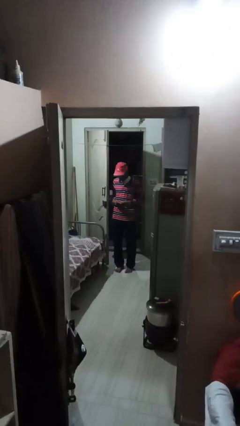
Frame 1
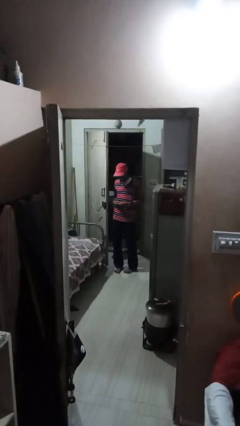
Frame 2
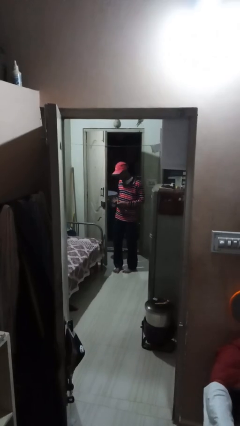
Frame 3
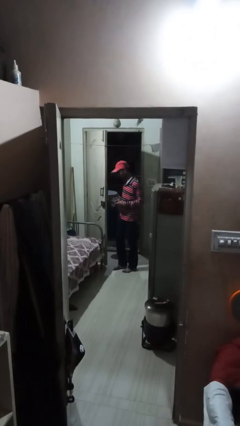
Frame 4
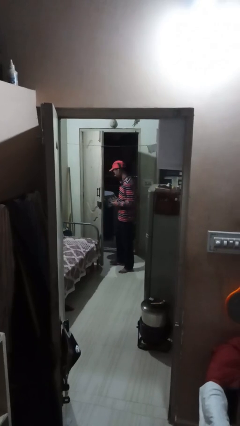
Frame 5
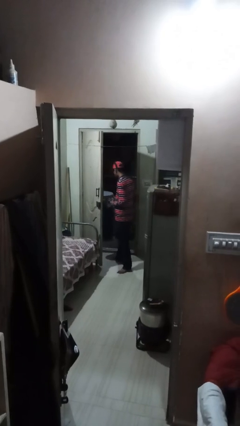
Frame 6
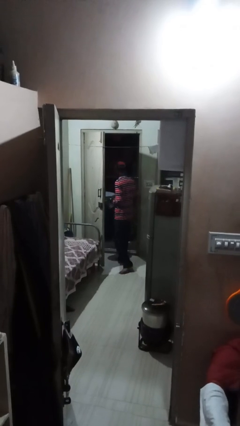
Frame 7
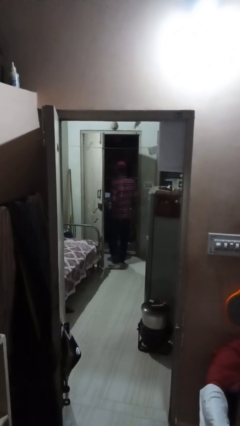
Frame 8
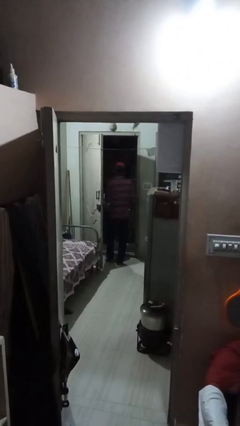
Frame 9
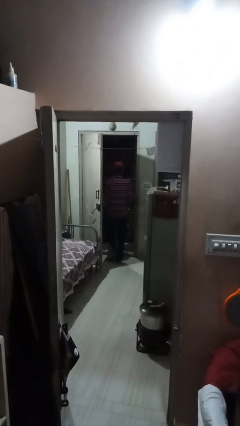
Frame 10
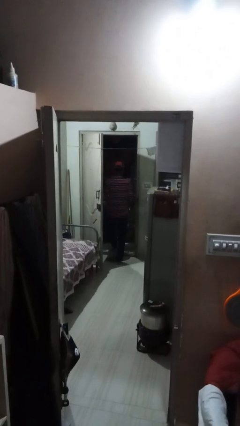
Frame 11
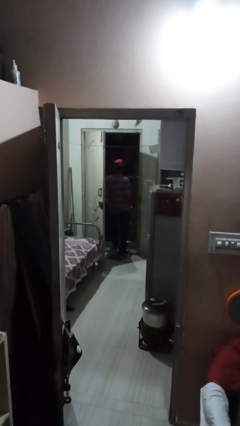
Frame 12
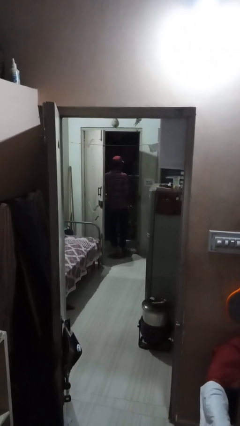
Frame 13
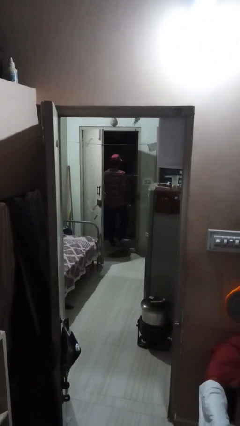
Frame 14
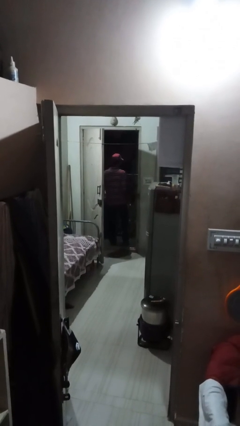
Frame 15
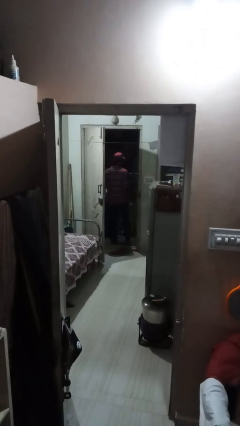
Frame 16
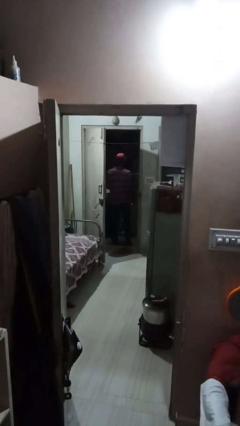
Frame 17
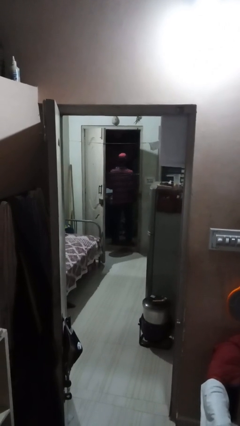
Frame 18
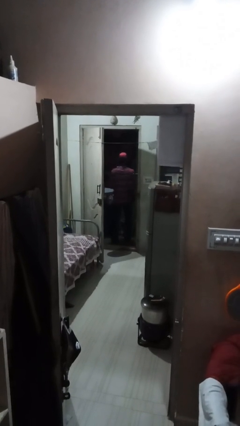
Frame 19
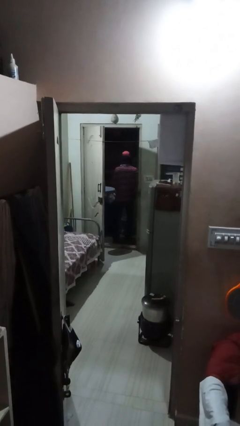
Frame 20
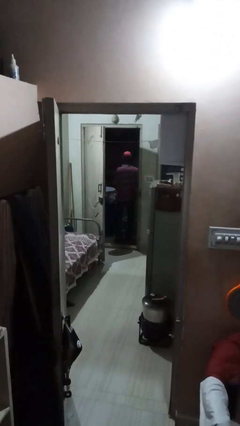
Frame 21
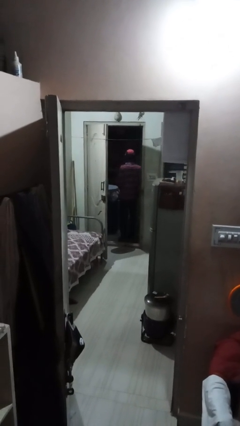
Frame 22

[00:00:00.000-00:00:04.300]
person exits scene through structure

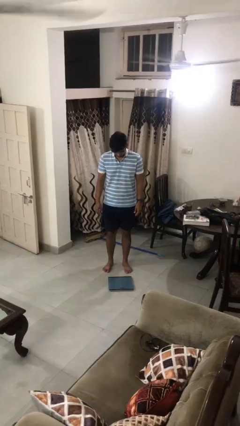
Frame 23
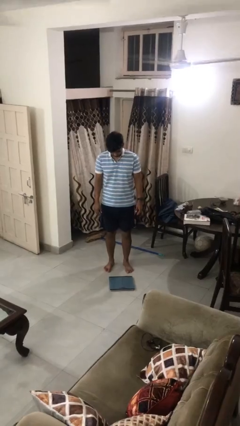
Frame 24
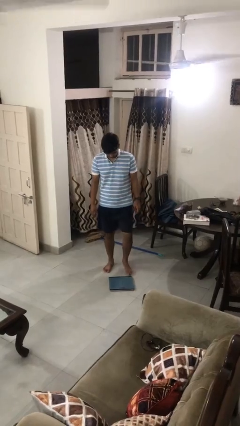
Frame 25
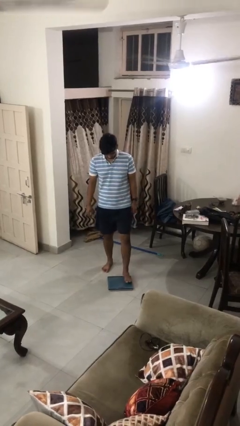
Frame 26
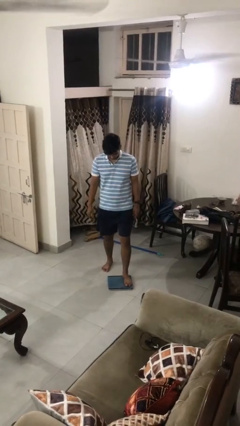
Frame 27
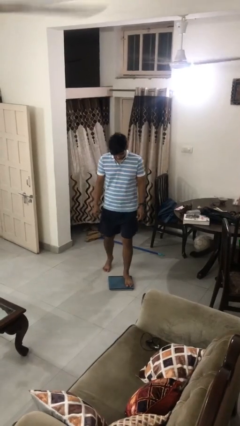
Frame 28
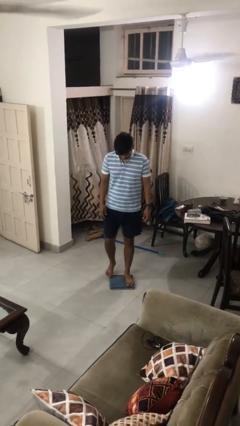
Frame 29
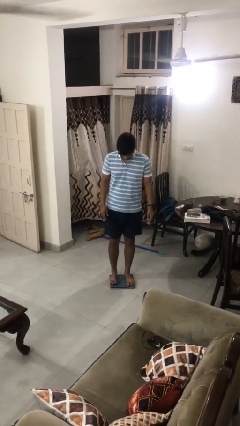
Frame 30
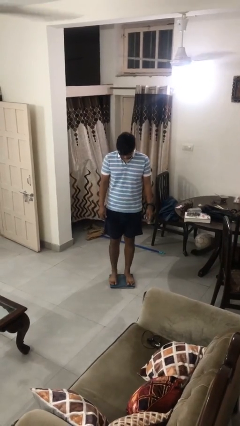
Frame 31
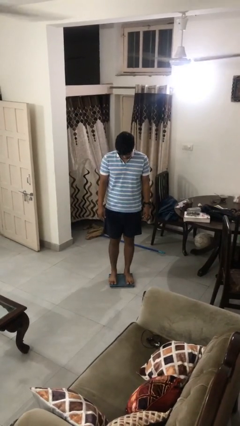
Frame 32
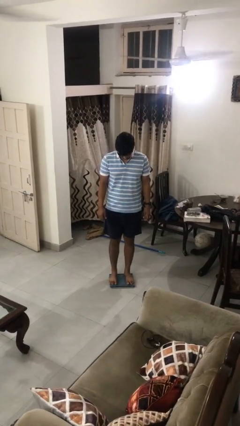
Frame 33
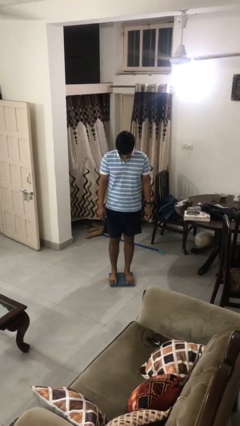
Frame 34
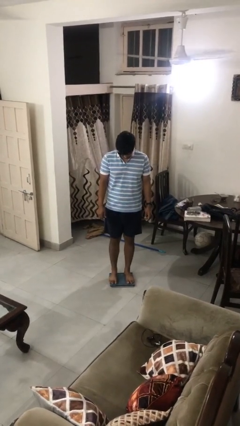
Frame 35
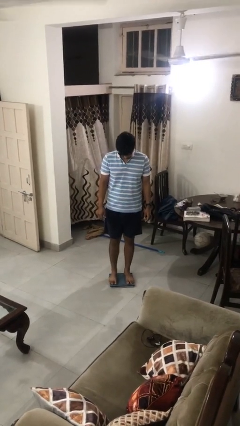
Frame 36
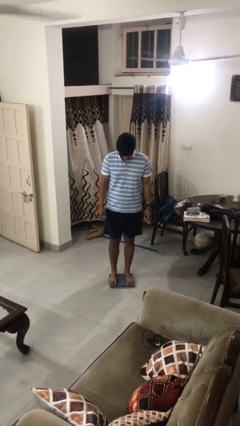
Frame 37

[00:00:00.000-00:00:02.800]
person uses bodyweight scale

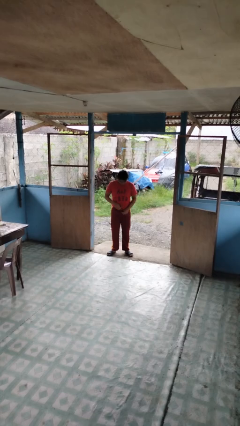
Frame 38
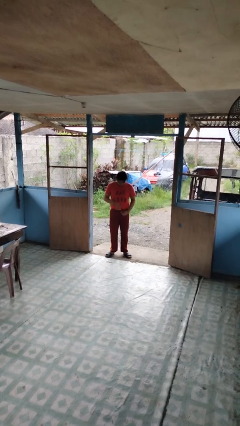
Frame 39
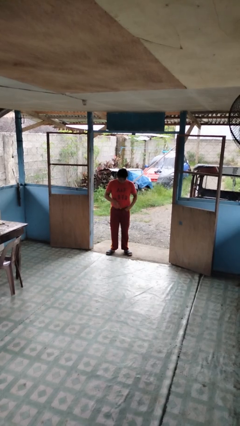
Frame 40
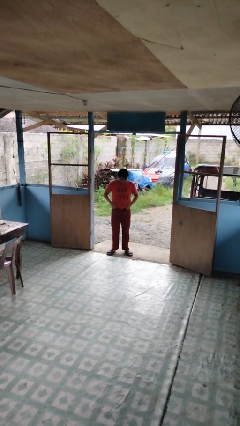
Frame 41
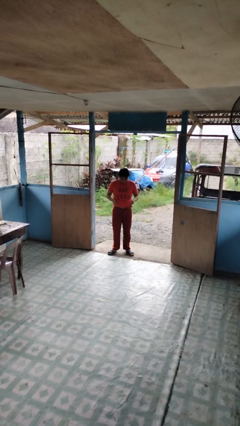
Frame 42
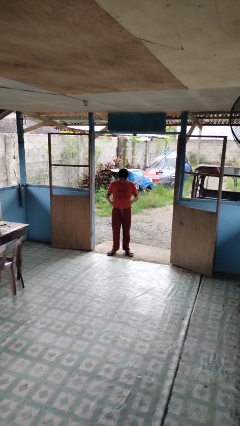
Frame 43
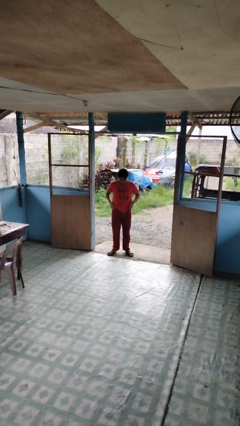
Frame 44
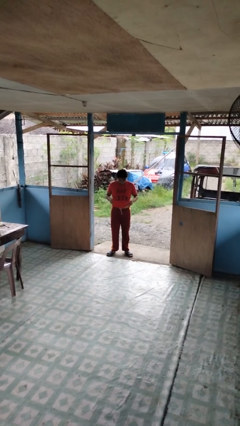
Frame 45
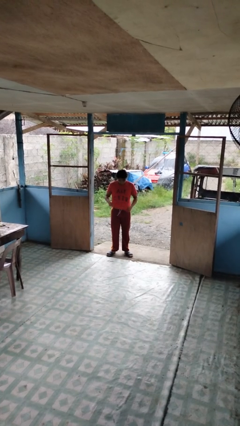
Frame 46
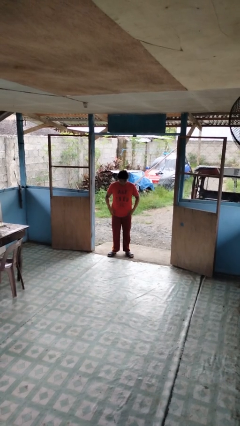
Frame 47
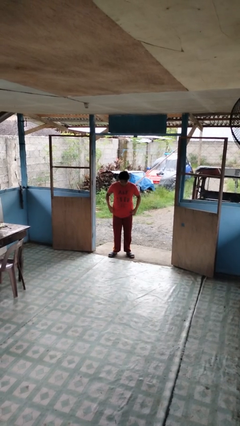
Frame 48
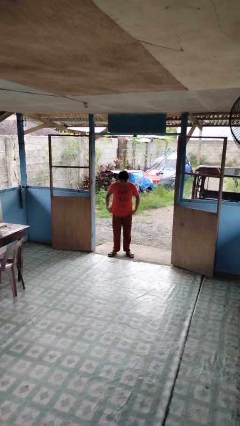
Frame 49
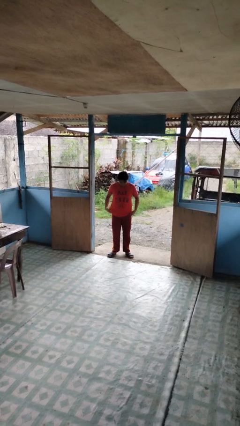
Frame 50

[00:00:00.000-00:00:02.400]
person untucks shirt

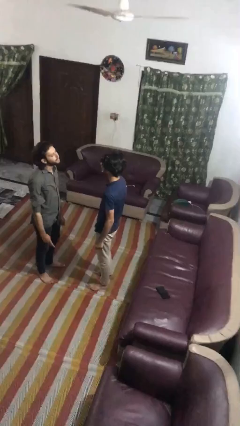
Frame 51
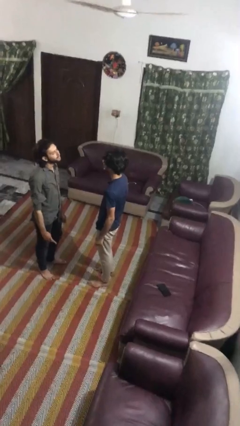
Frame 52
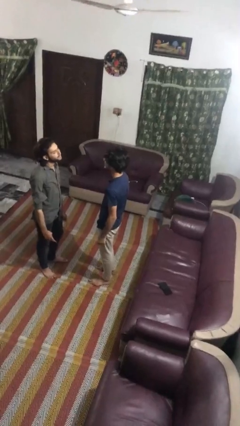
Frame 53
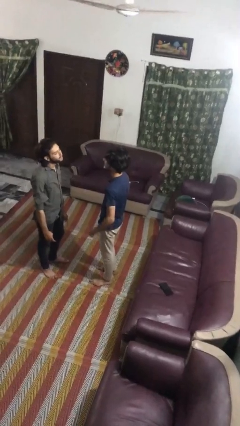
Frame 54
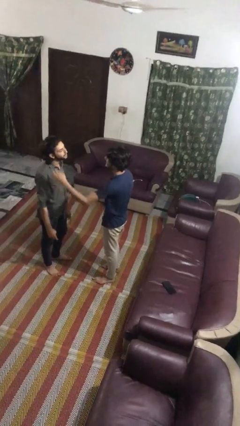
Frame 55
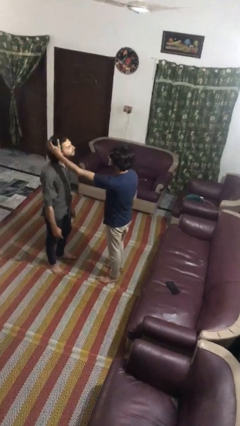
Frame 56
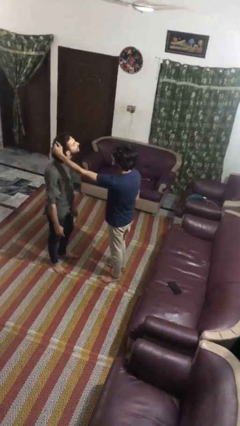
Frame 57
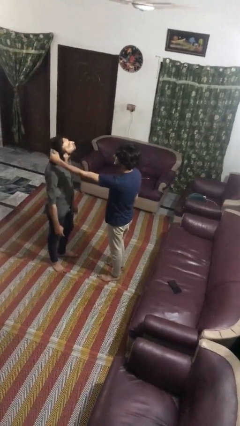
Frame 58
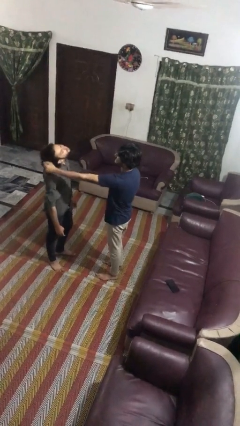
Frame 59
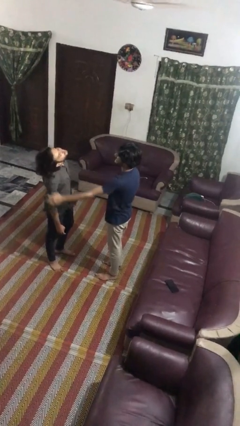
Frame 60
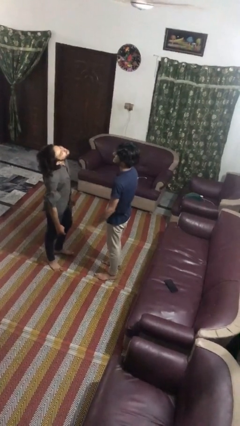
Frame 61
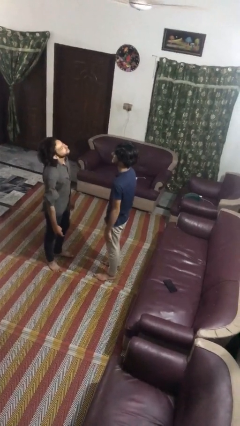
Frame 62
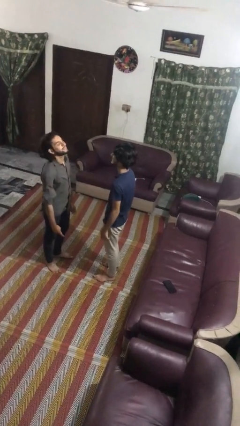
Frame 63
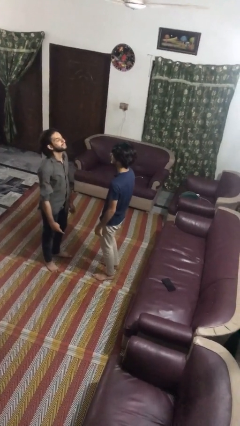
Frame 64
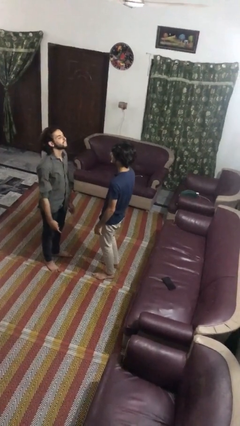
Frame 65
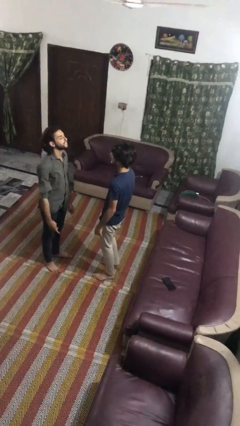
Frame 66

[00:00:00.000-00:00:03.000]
person grabs person by hair

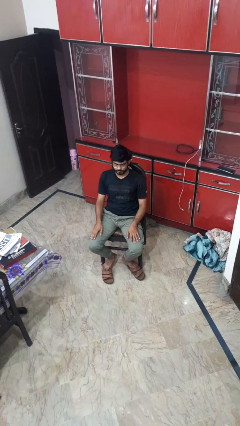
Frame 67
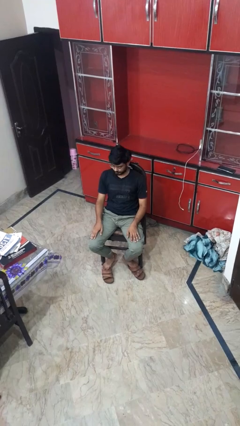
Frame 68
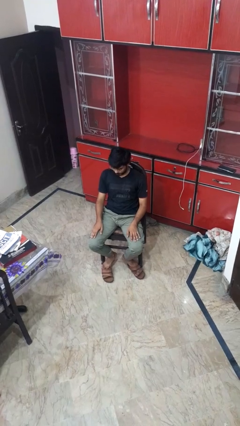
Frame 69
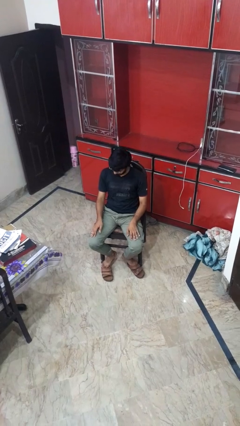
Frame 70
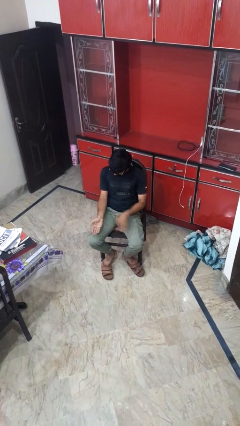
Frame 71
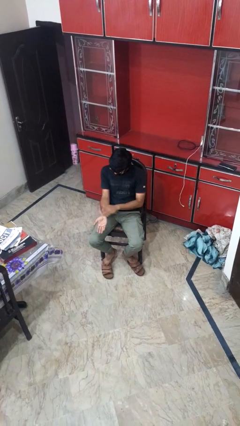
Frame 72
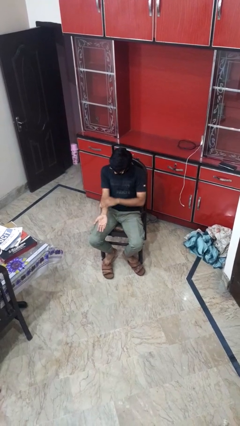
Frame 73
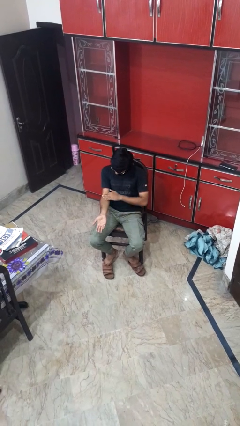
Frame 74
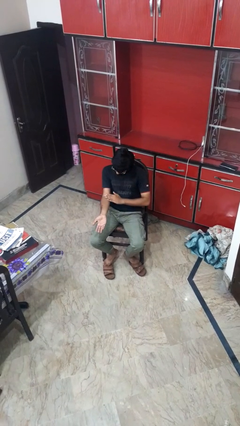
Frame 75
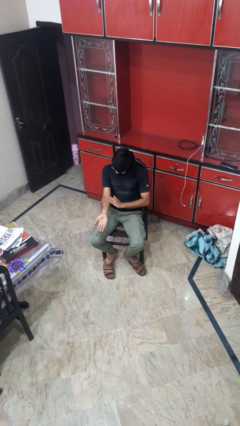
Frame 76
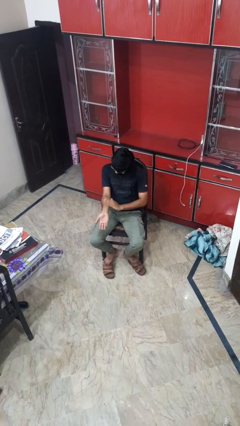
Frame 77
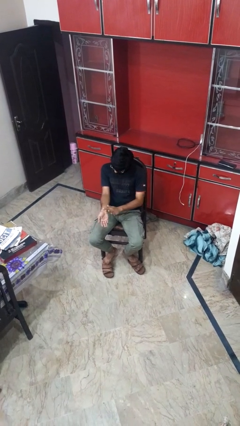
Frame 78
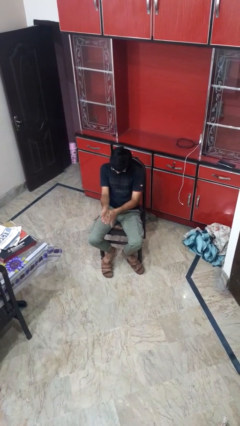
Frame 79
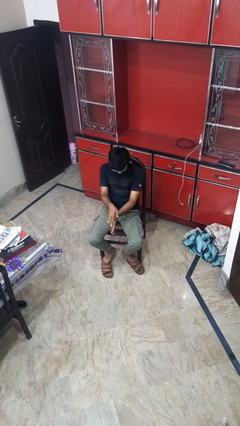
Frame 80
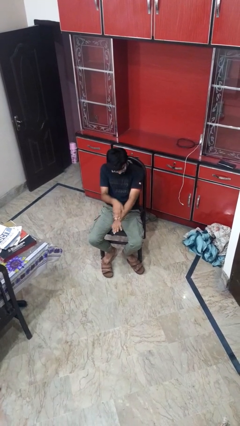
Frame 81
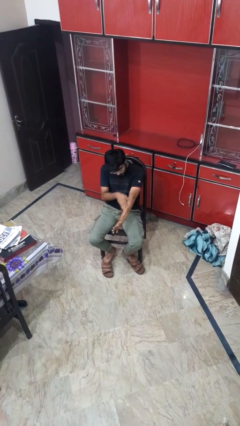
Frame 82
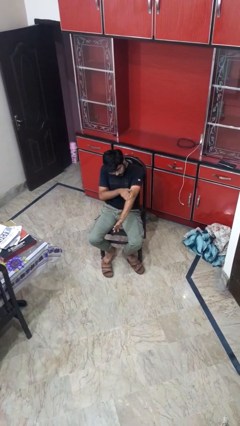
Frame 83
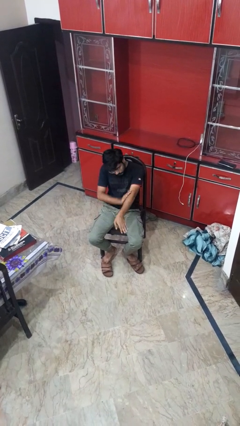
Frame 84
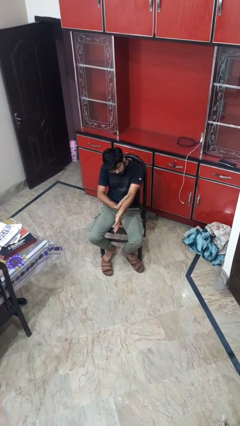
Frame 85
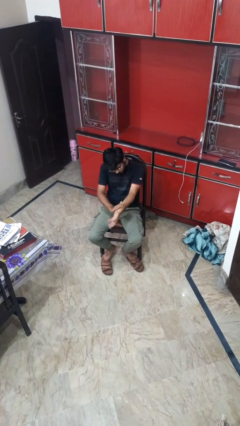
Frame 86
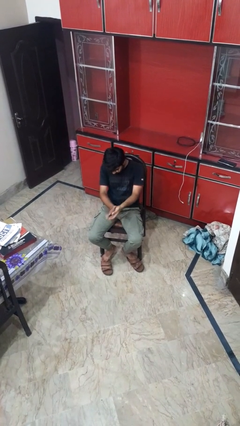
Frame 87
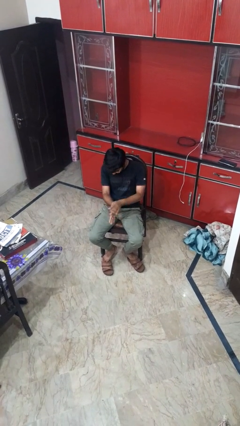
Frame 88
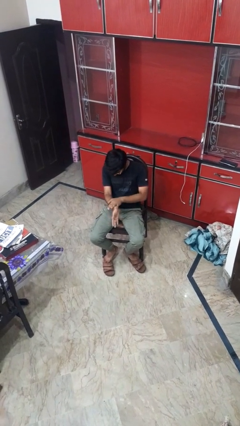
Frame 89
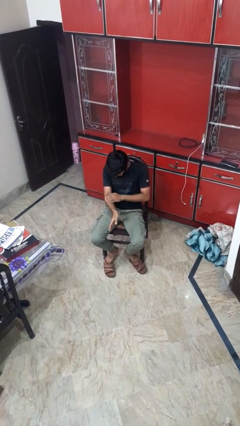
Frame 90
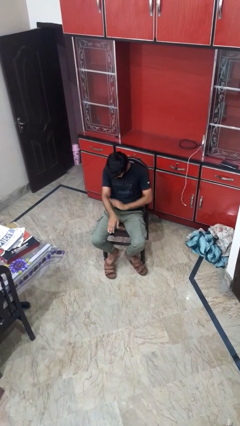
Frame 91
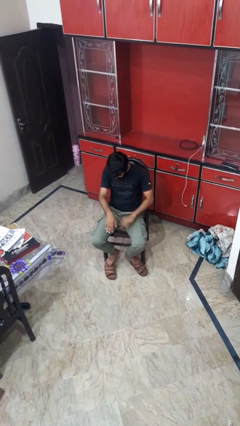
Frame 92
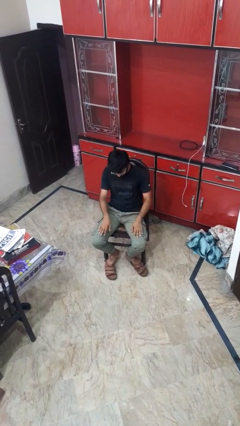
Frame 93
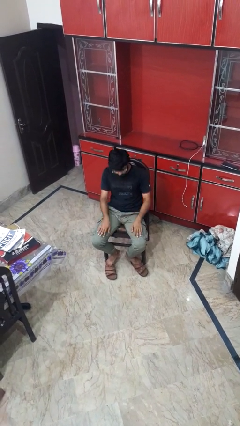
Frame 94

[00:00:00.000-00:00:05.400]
person looks at hands in lap
